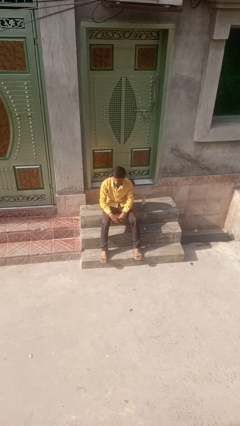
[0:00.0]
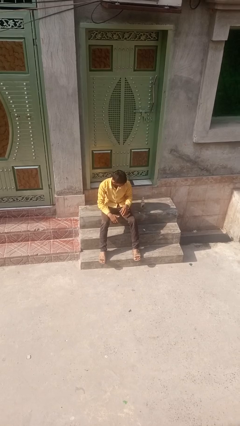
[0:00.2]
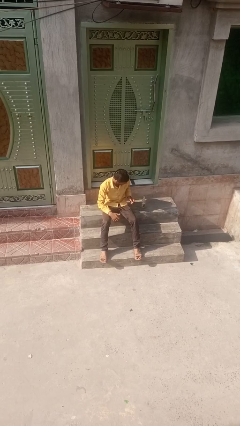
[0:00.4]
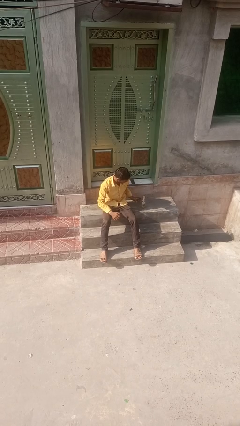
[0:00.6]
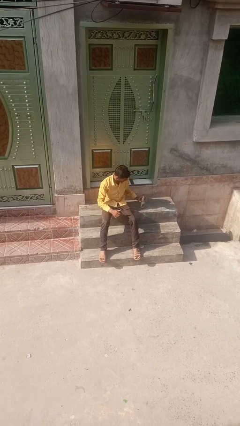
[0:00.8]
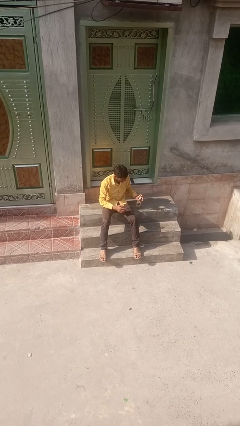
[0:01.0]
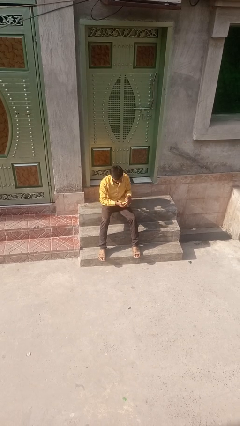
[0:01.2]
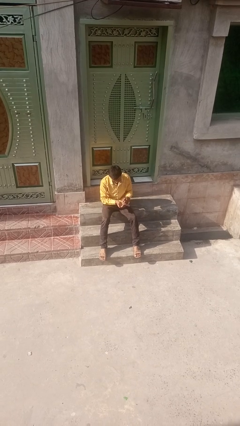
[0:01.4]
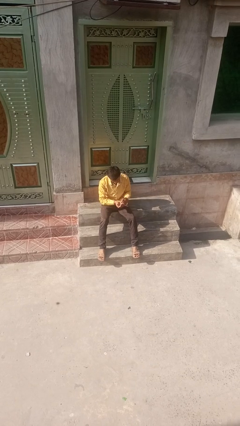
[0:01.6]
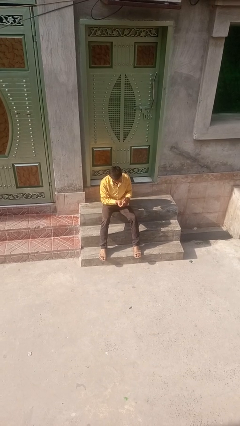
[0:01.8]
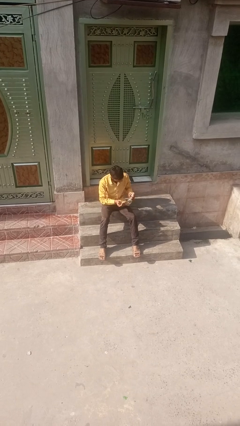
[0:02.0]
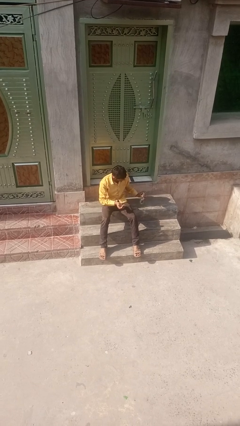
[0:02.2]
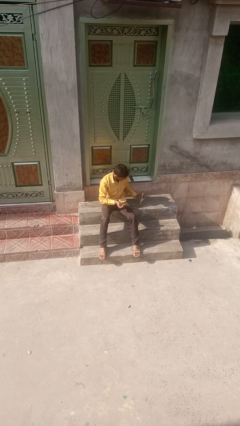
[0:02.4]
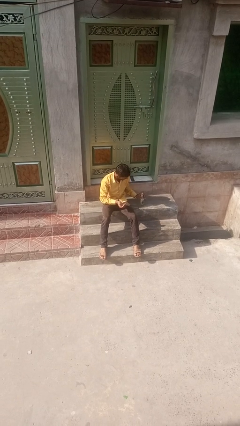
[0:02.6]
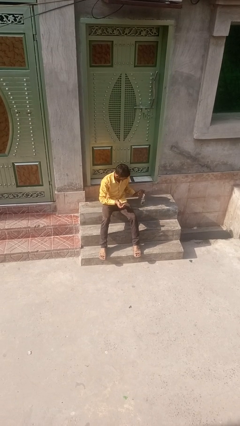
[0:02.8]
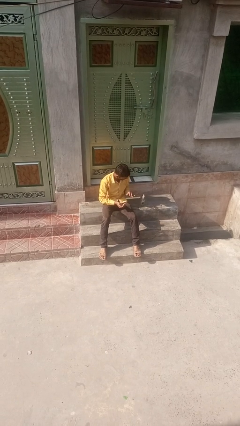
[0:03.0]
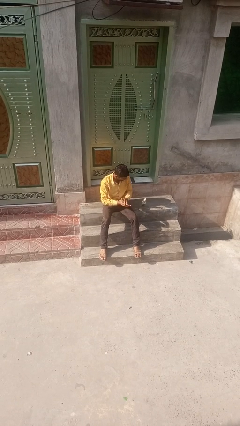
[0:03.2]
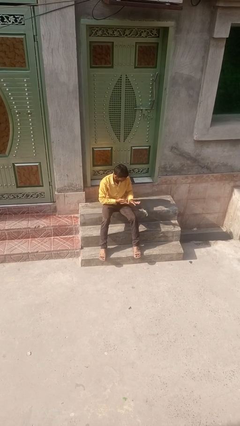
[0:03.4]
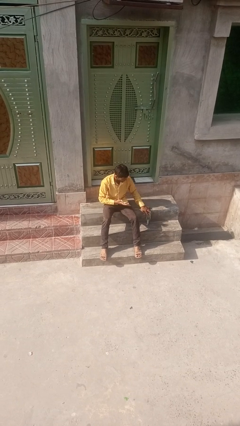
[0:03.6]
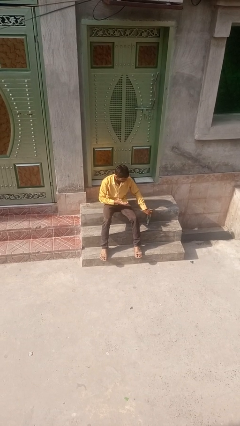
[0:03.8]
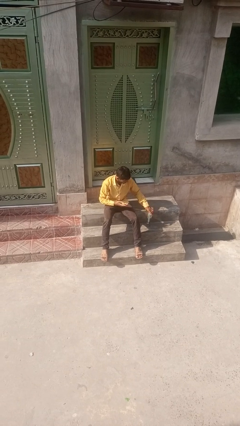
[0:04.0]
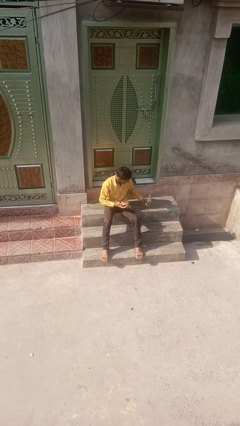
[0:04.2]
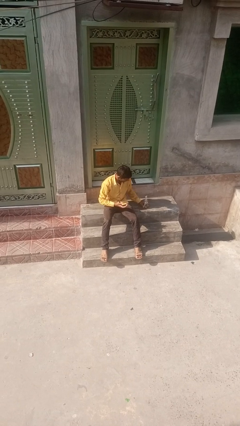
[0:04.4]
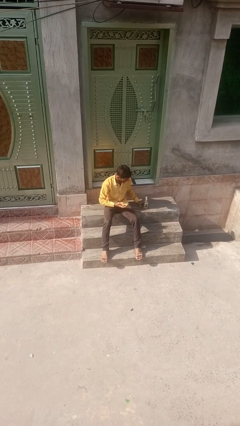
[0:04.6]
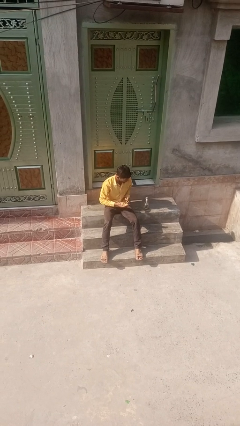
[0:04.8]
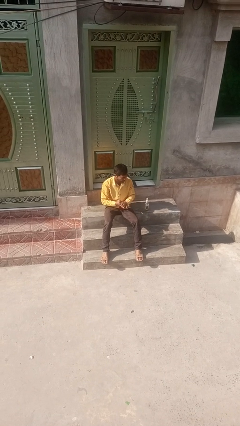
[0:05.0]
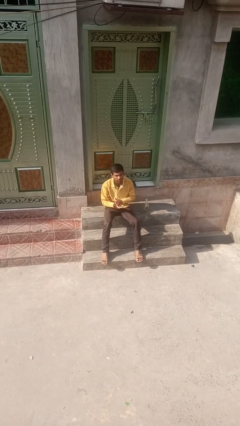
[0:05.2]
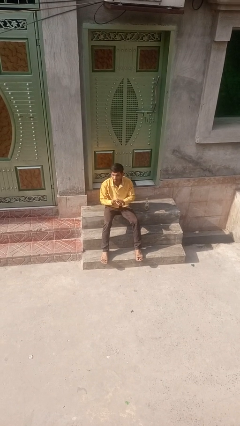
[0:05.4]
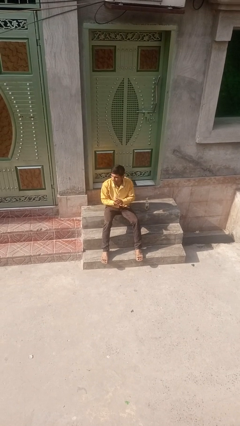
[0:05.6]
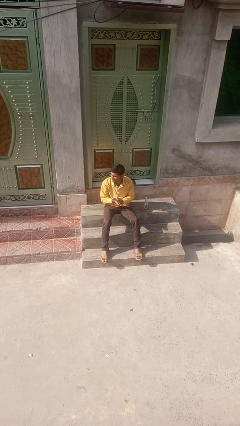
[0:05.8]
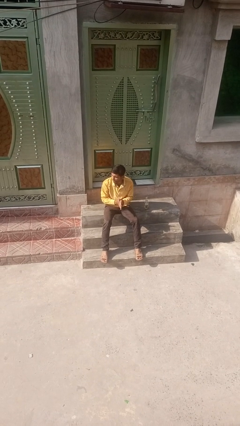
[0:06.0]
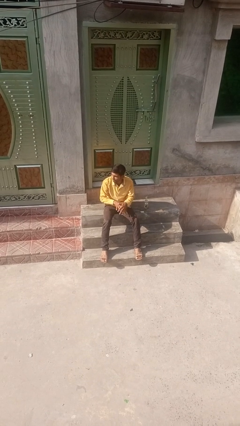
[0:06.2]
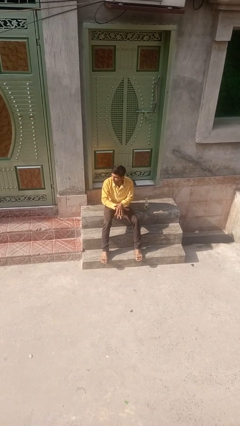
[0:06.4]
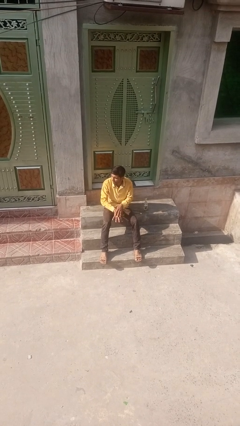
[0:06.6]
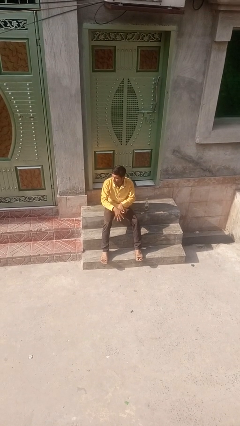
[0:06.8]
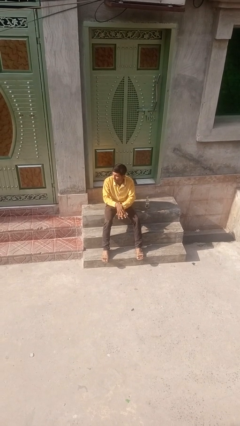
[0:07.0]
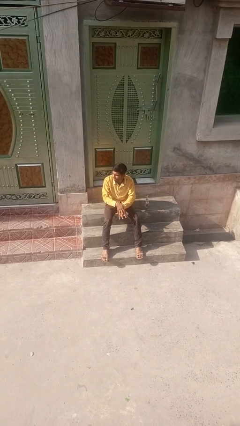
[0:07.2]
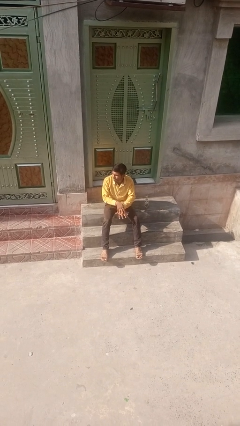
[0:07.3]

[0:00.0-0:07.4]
person applies facial moisturizer

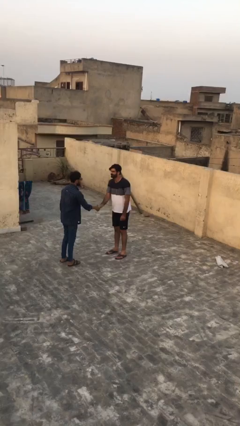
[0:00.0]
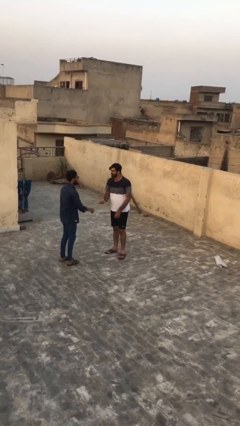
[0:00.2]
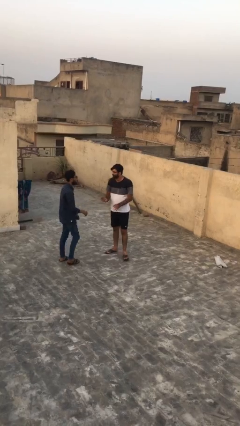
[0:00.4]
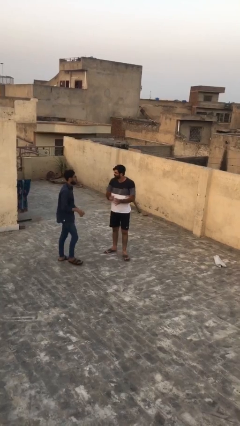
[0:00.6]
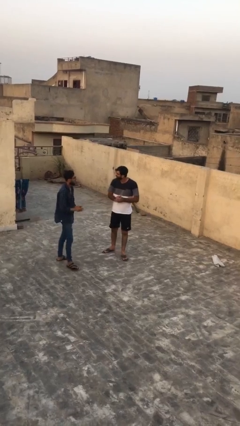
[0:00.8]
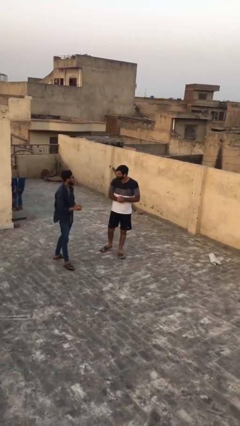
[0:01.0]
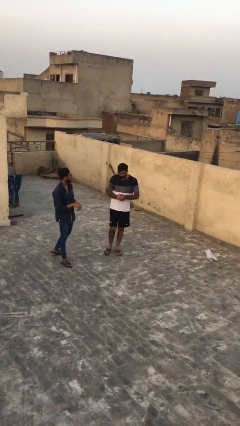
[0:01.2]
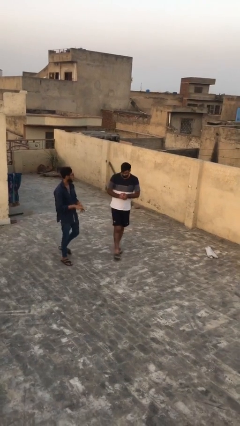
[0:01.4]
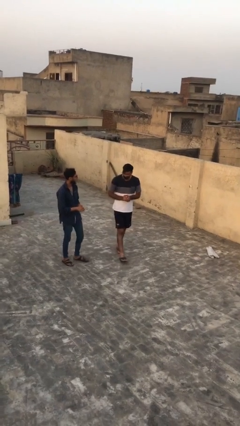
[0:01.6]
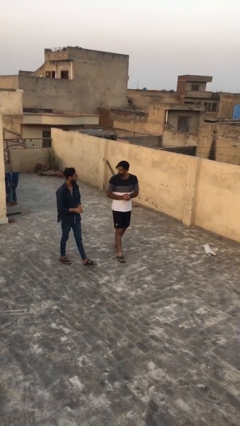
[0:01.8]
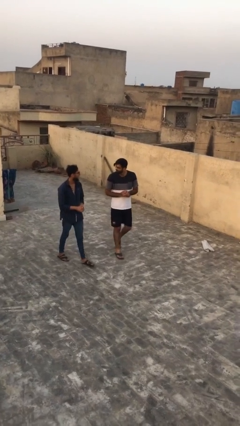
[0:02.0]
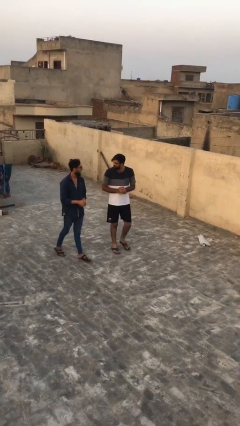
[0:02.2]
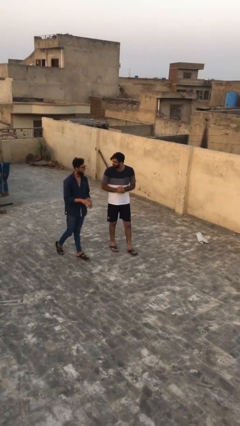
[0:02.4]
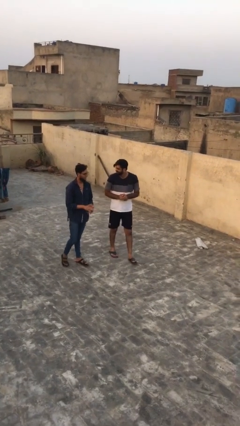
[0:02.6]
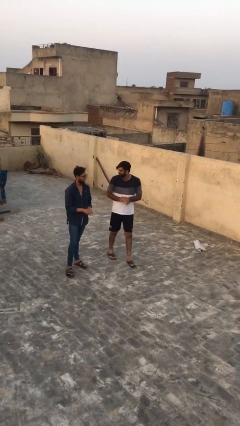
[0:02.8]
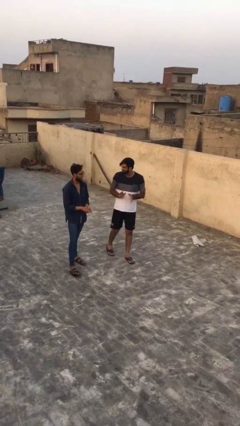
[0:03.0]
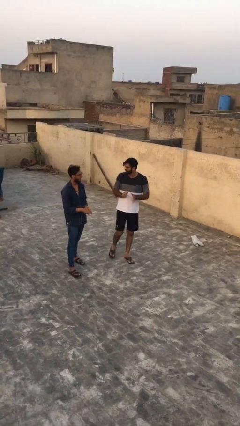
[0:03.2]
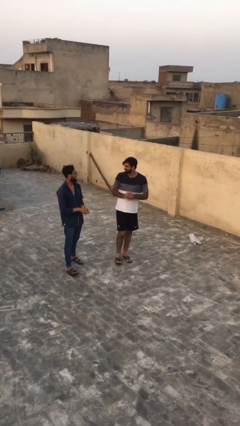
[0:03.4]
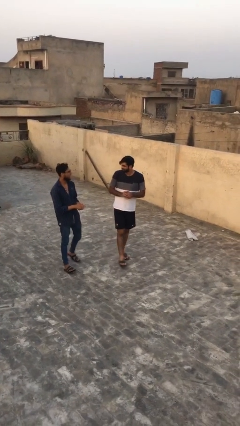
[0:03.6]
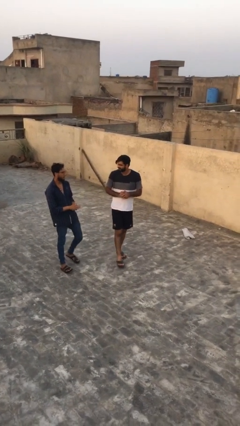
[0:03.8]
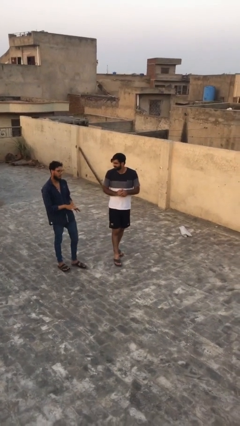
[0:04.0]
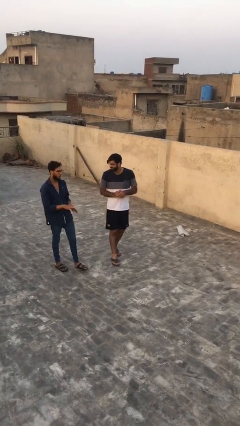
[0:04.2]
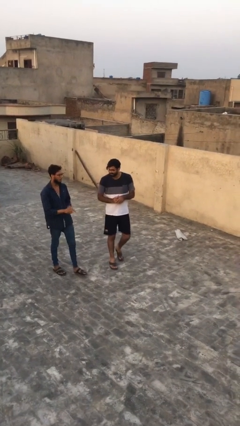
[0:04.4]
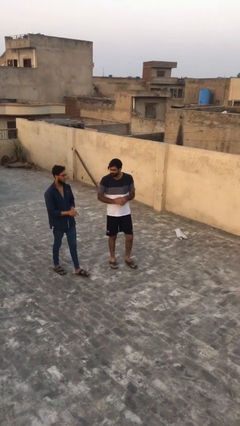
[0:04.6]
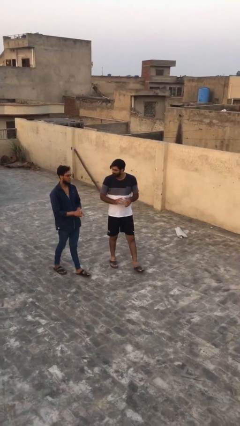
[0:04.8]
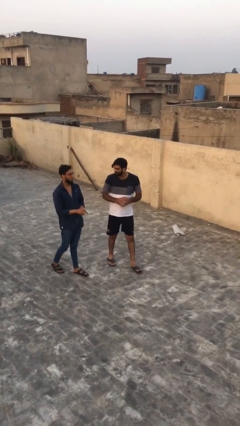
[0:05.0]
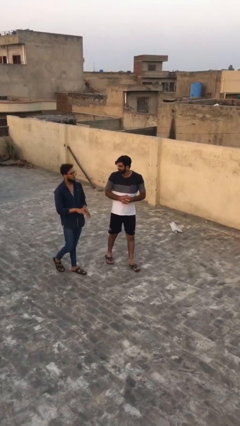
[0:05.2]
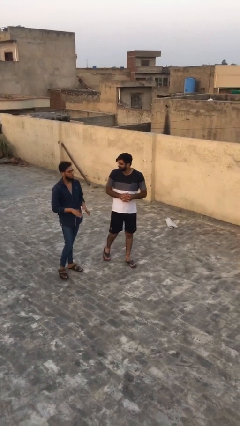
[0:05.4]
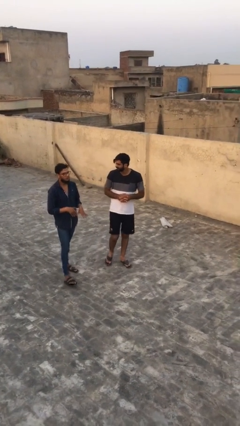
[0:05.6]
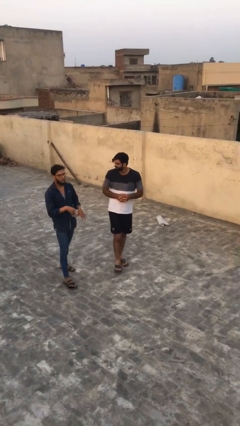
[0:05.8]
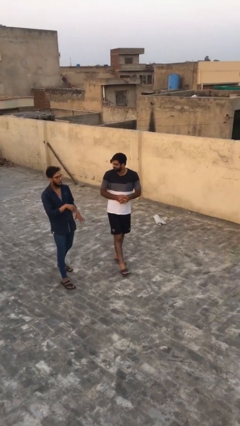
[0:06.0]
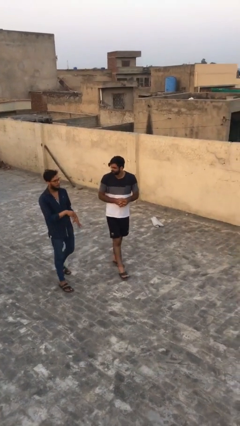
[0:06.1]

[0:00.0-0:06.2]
person talks to person

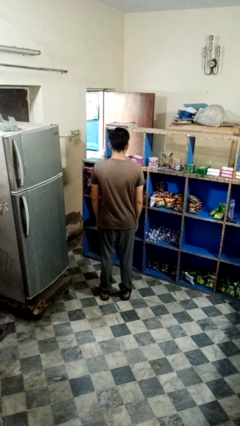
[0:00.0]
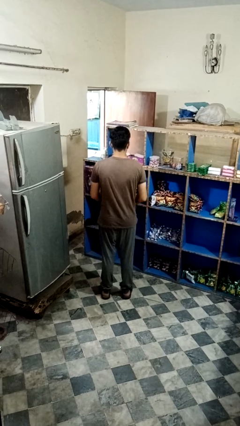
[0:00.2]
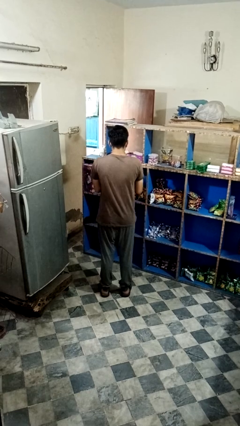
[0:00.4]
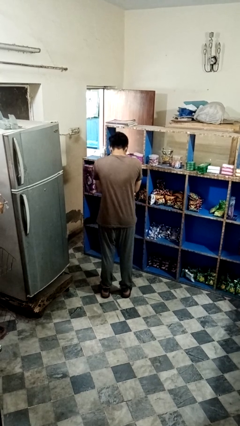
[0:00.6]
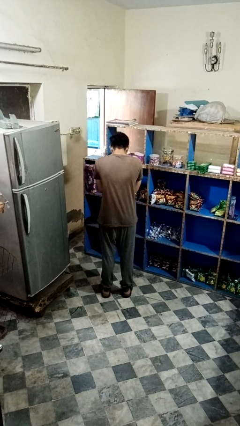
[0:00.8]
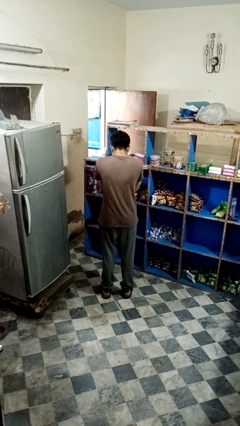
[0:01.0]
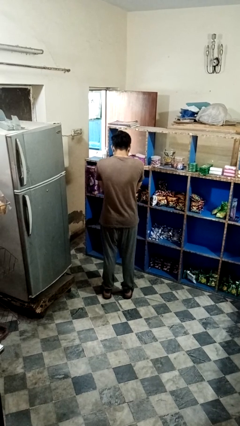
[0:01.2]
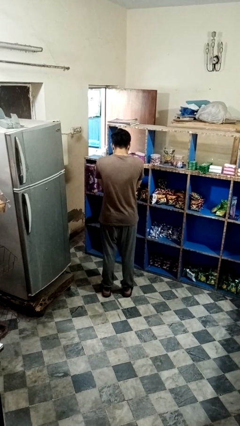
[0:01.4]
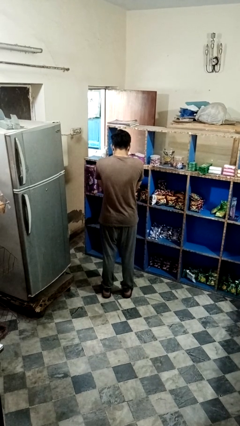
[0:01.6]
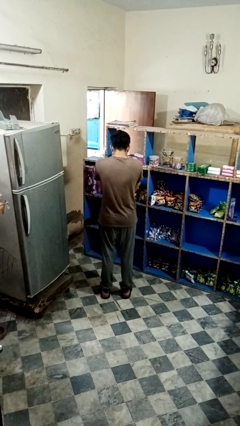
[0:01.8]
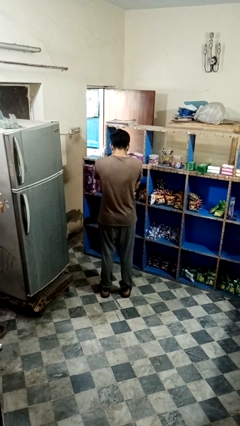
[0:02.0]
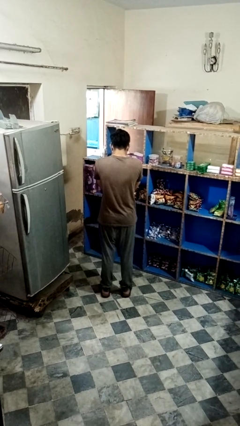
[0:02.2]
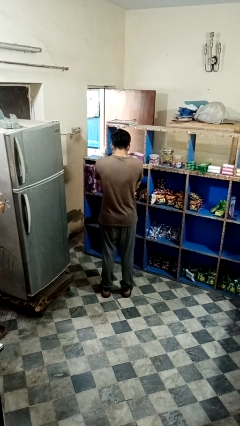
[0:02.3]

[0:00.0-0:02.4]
person sneezes into hand

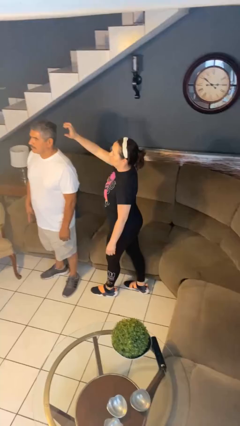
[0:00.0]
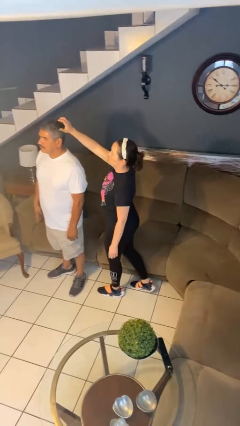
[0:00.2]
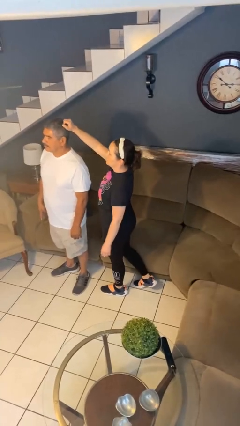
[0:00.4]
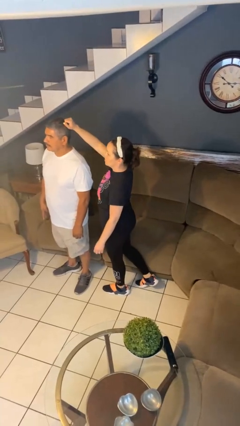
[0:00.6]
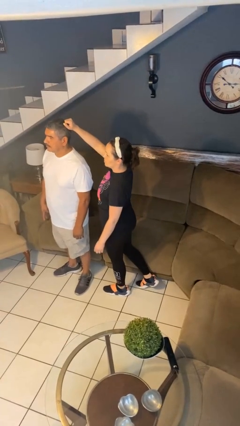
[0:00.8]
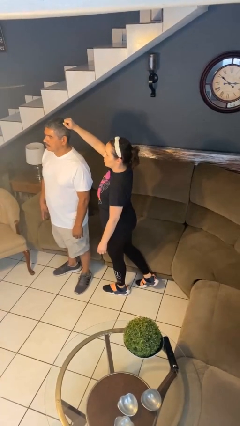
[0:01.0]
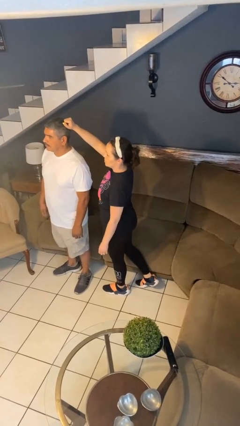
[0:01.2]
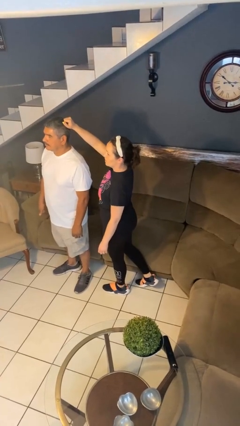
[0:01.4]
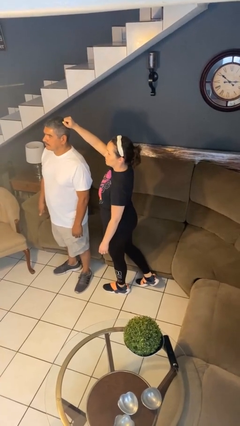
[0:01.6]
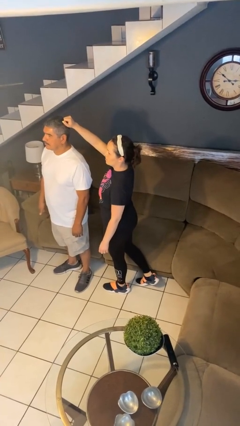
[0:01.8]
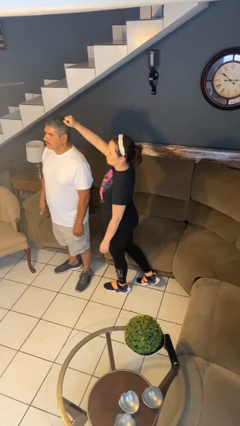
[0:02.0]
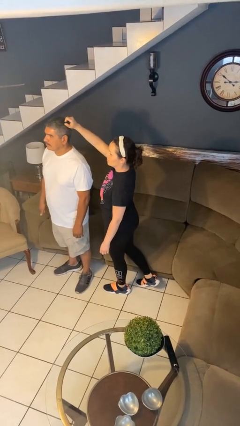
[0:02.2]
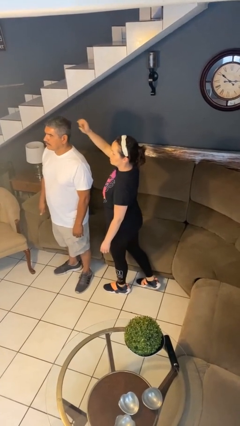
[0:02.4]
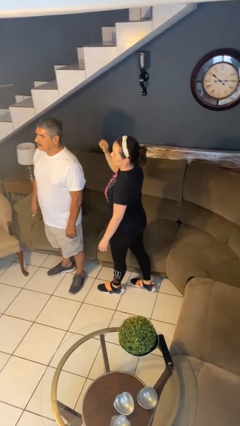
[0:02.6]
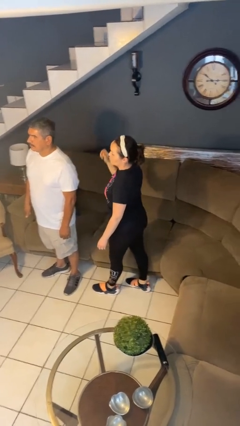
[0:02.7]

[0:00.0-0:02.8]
person grabs person by hair
